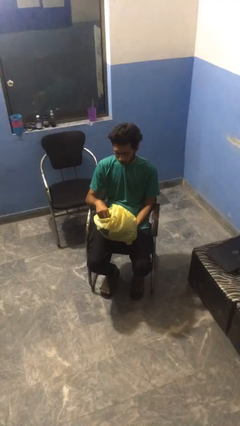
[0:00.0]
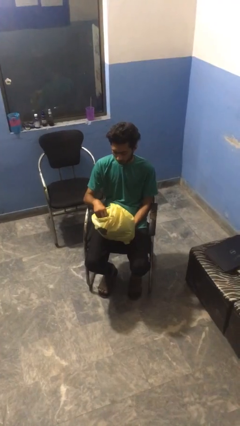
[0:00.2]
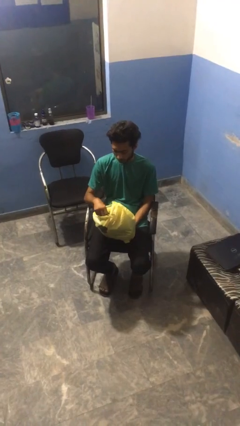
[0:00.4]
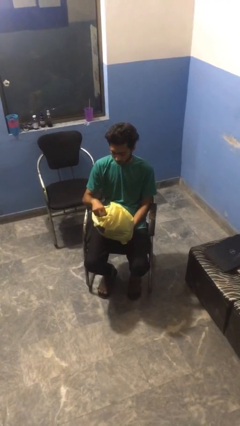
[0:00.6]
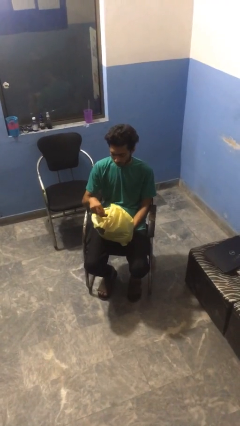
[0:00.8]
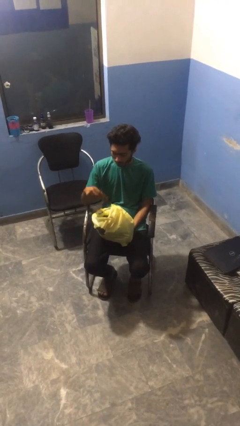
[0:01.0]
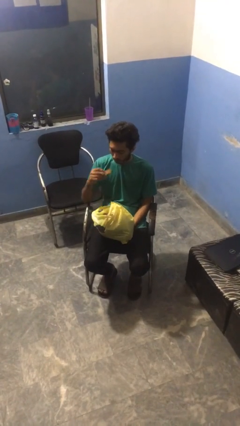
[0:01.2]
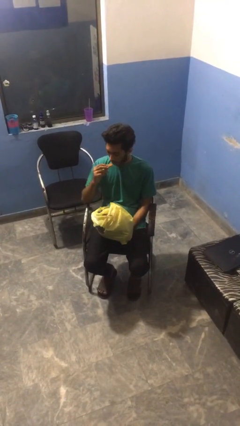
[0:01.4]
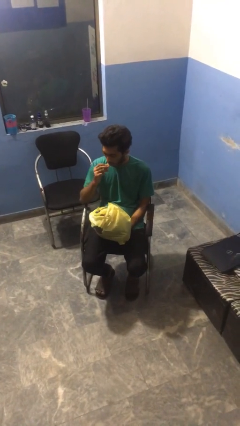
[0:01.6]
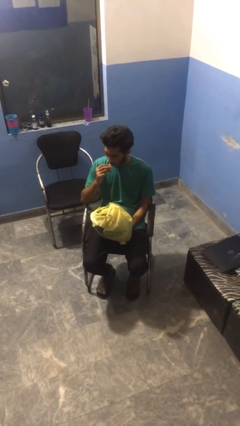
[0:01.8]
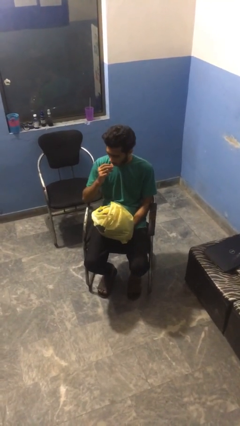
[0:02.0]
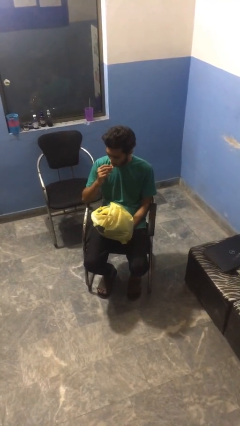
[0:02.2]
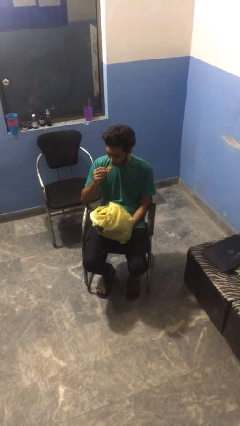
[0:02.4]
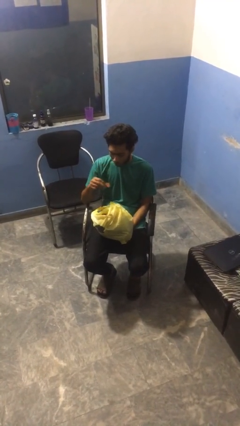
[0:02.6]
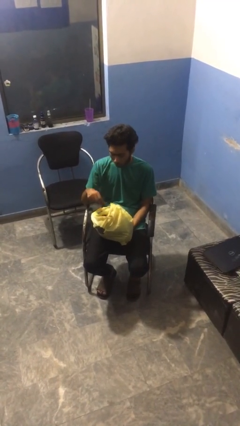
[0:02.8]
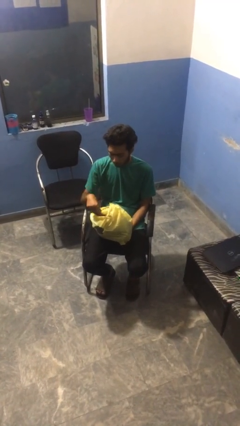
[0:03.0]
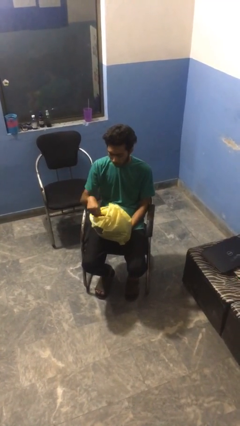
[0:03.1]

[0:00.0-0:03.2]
person eats snack from bag

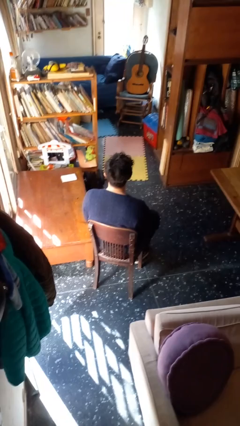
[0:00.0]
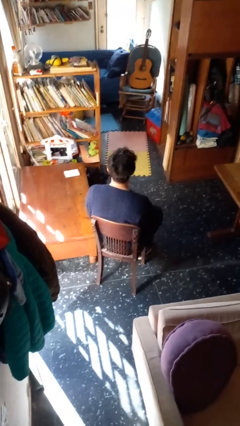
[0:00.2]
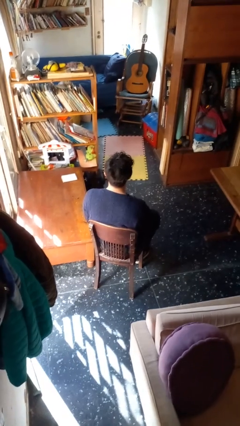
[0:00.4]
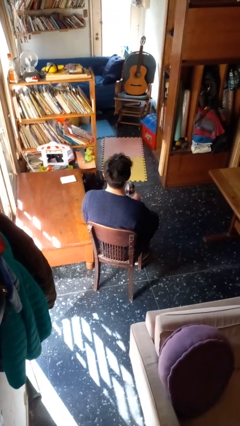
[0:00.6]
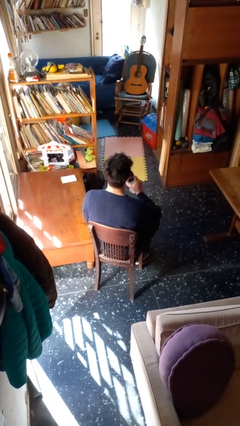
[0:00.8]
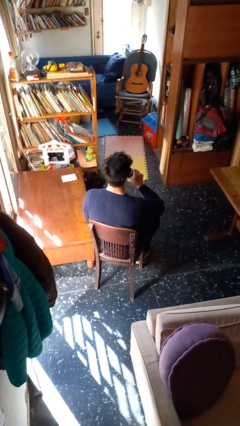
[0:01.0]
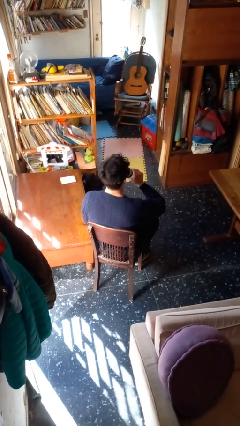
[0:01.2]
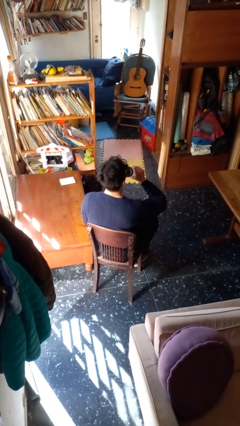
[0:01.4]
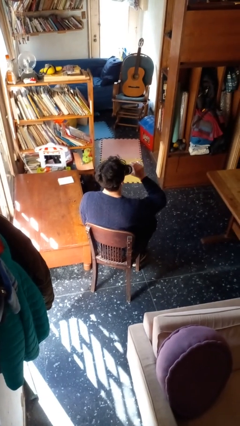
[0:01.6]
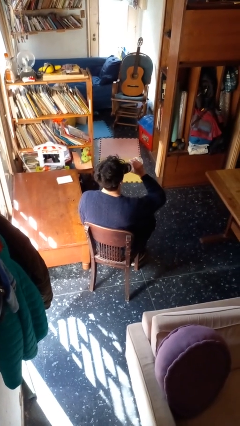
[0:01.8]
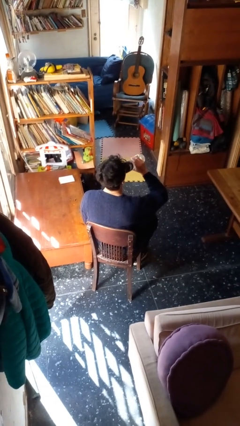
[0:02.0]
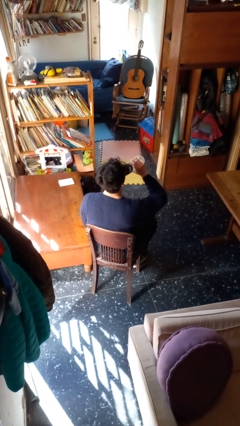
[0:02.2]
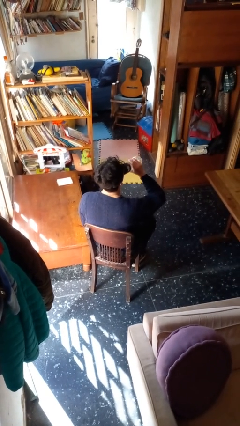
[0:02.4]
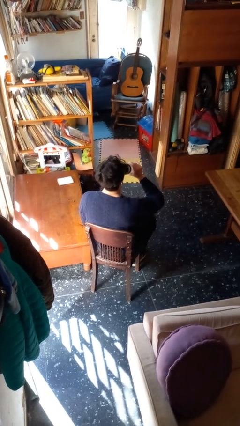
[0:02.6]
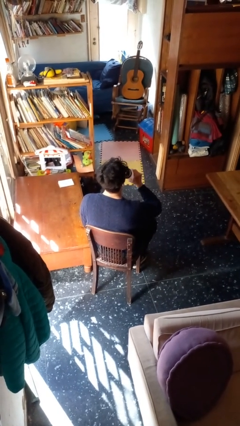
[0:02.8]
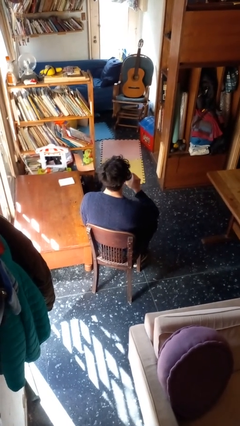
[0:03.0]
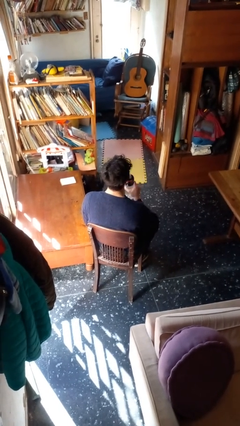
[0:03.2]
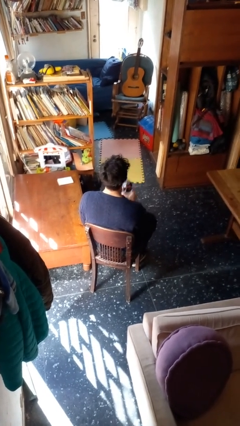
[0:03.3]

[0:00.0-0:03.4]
person drinks from bottle

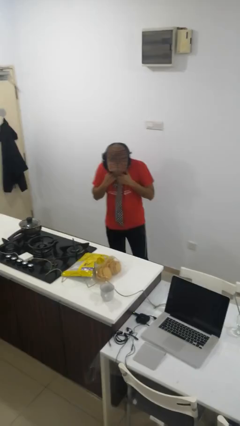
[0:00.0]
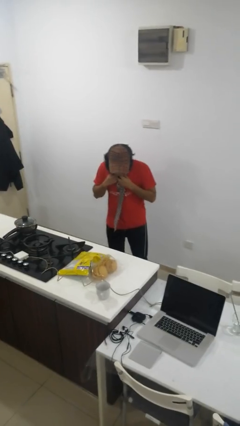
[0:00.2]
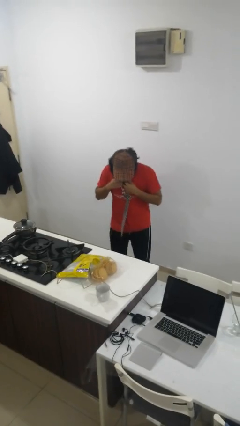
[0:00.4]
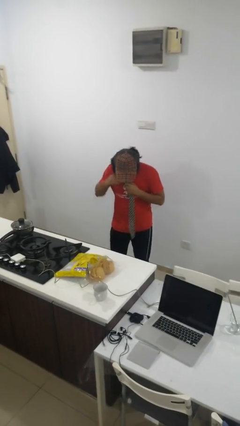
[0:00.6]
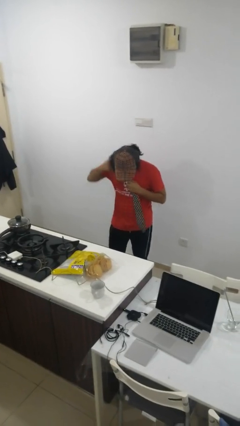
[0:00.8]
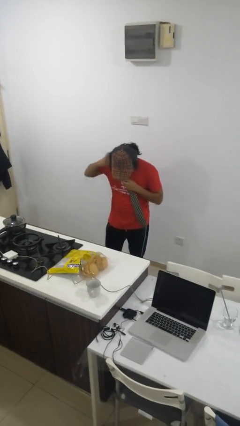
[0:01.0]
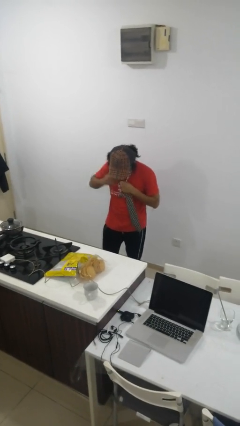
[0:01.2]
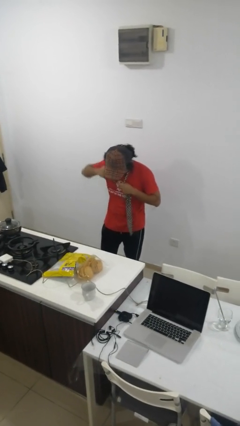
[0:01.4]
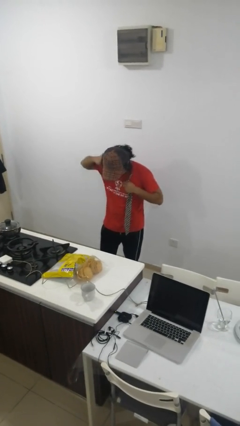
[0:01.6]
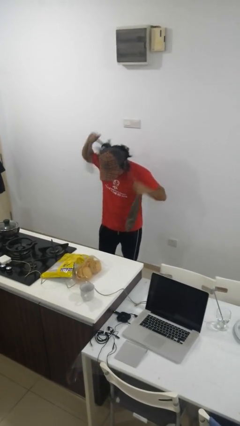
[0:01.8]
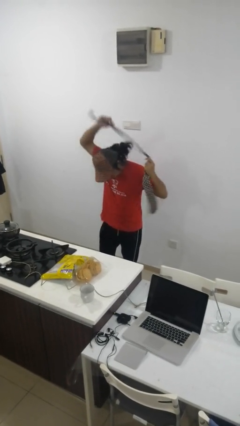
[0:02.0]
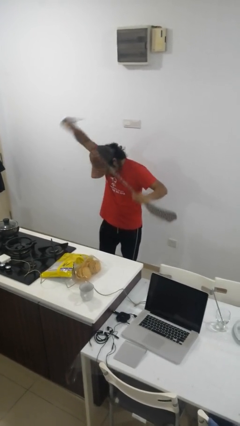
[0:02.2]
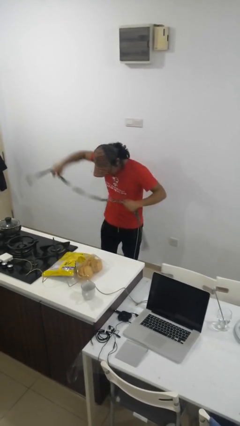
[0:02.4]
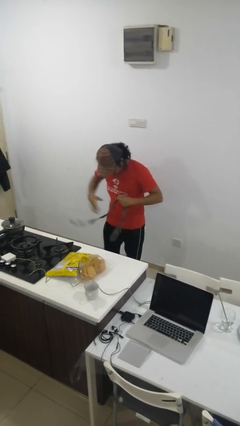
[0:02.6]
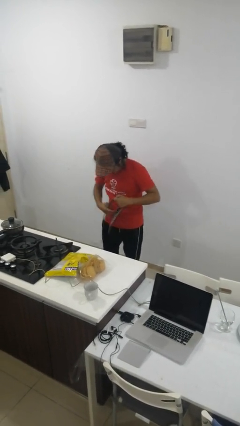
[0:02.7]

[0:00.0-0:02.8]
person takes off necktie

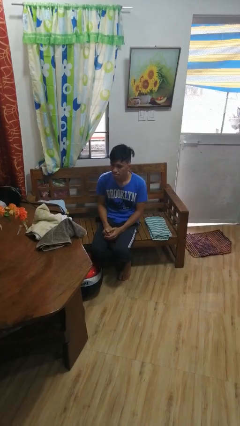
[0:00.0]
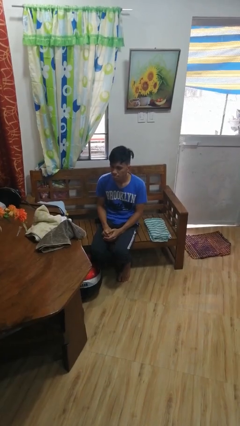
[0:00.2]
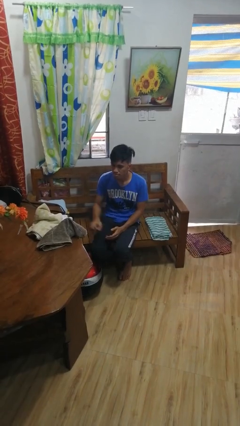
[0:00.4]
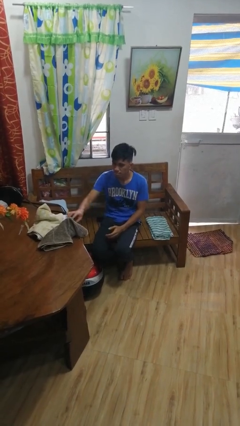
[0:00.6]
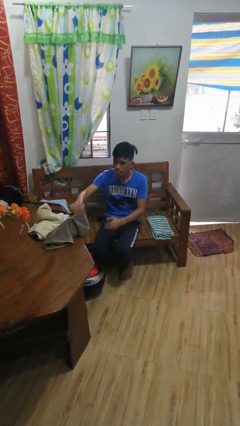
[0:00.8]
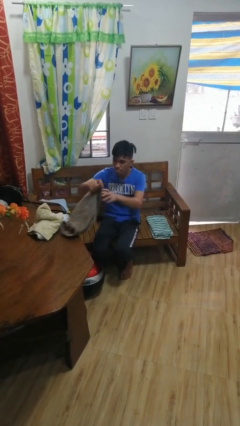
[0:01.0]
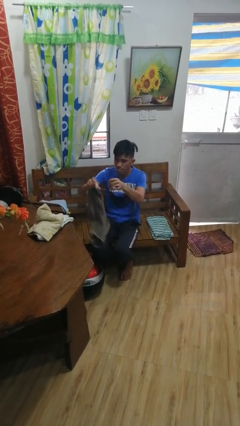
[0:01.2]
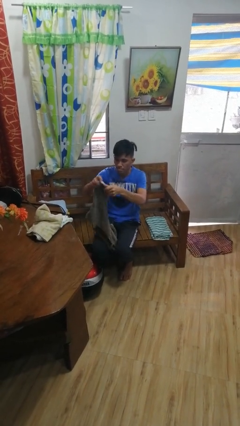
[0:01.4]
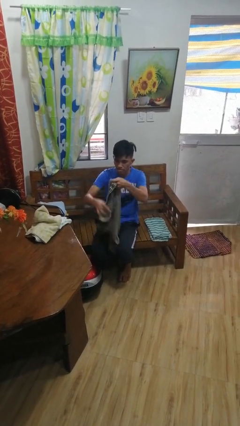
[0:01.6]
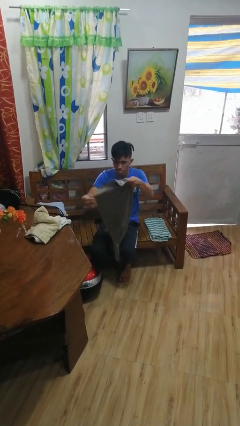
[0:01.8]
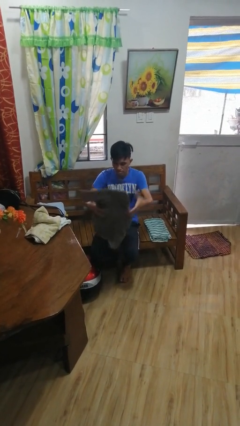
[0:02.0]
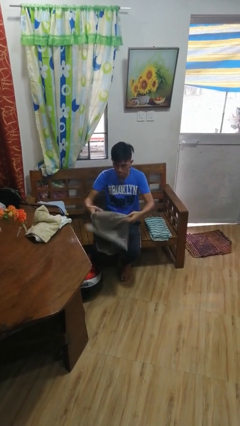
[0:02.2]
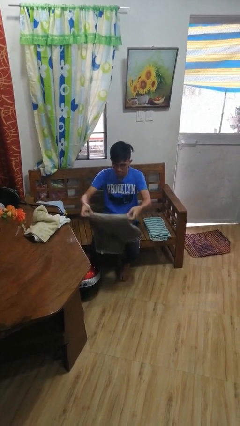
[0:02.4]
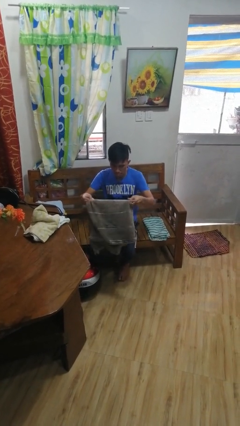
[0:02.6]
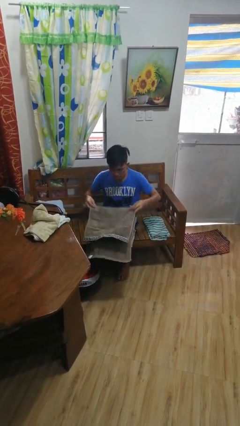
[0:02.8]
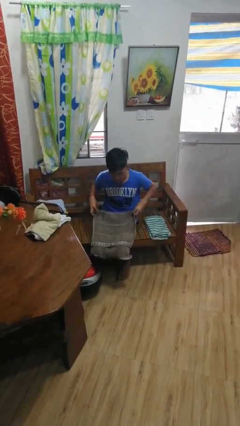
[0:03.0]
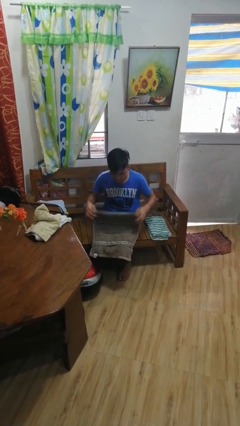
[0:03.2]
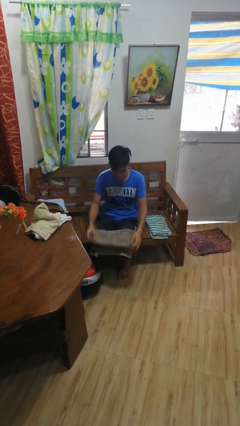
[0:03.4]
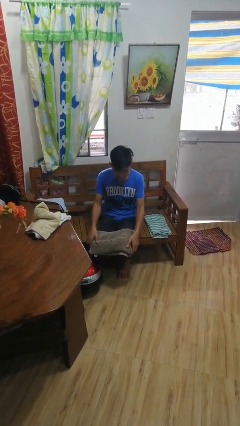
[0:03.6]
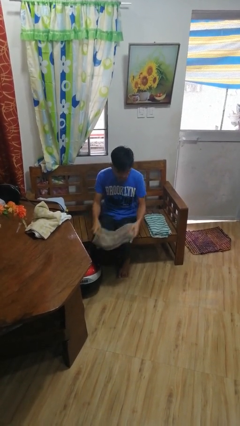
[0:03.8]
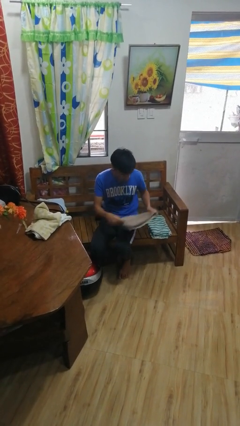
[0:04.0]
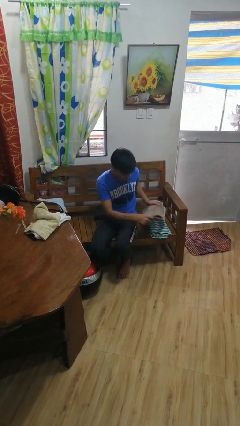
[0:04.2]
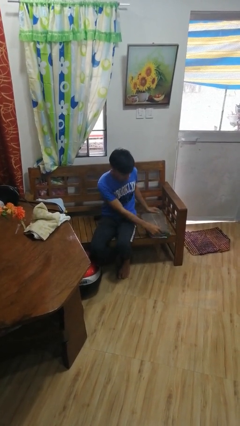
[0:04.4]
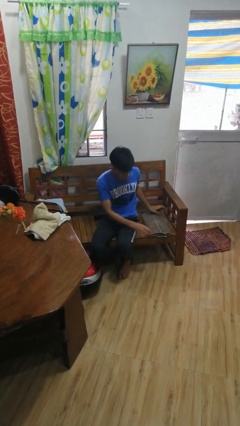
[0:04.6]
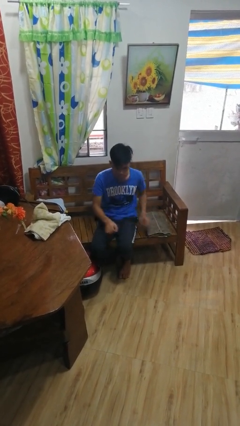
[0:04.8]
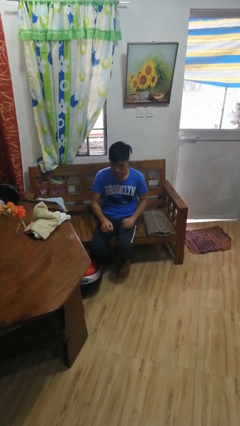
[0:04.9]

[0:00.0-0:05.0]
person folds towel

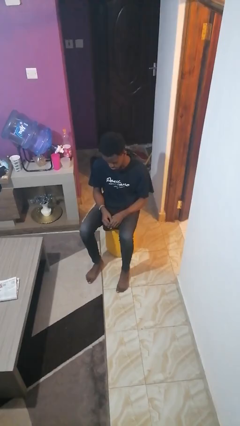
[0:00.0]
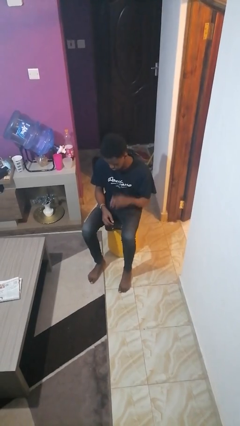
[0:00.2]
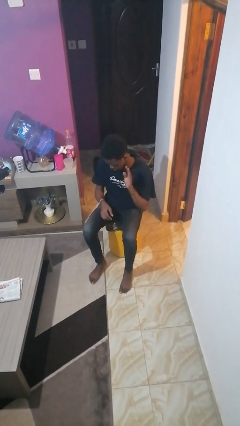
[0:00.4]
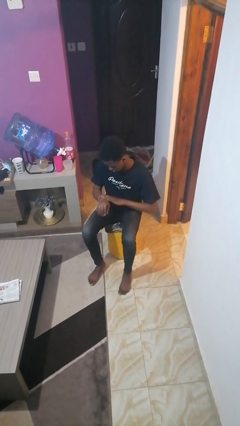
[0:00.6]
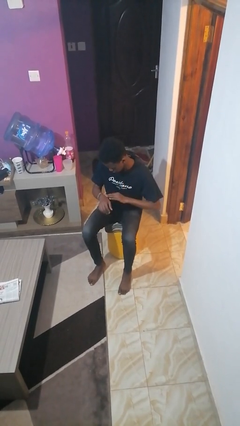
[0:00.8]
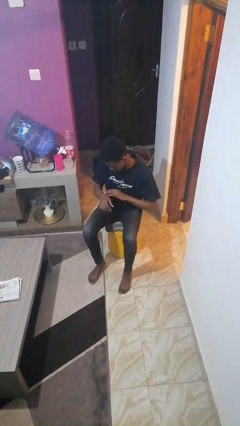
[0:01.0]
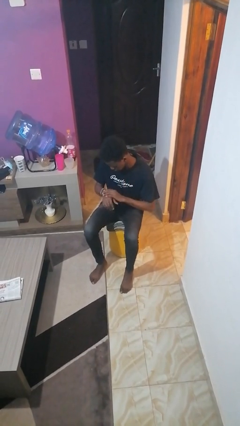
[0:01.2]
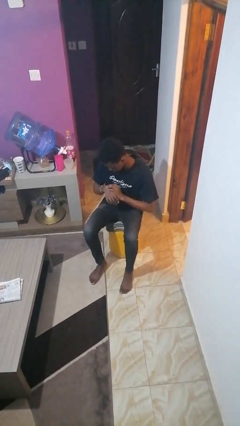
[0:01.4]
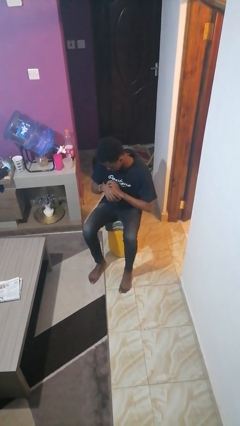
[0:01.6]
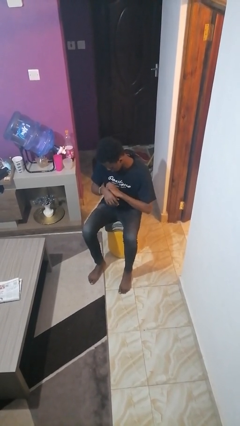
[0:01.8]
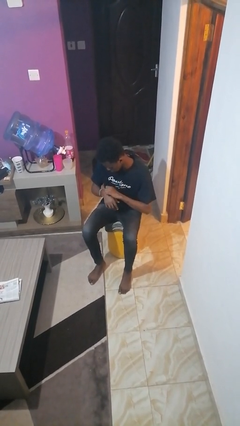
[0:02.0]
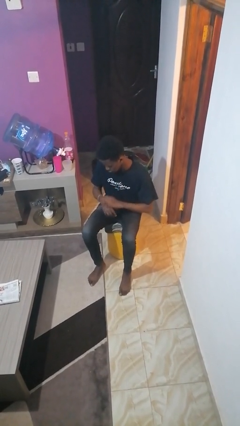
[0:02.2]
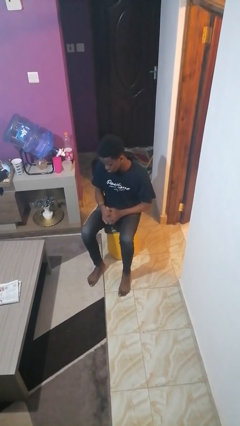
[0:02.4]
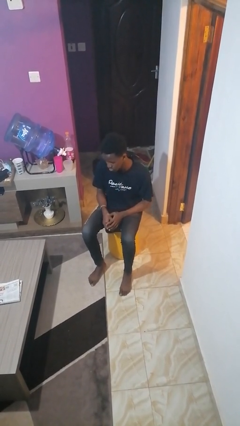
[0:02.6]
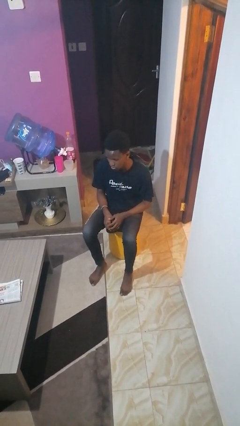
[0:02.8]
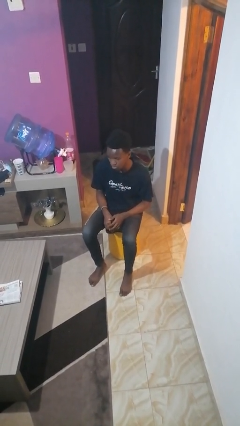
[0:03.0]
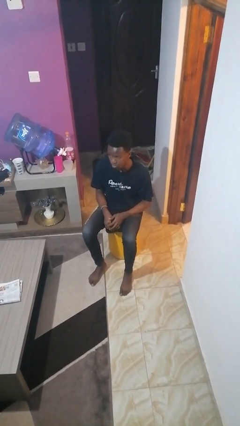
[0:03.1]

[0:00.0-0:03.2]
person swats bug
